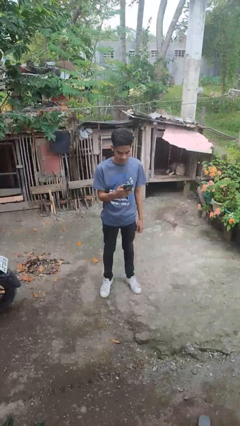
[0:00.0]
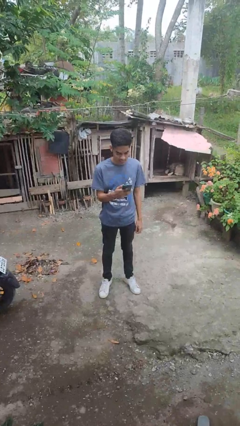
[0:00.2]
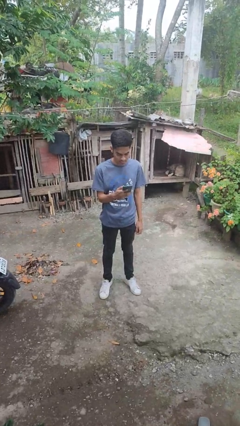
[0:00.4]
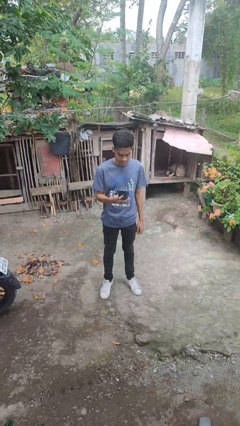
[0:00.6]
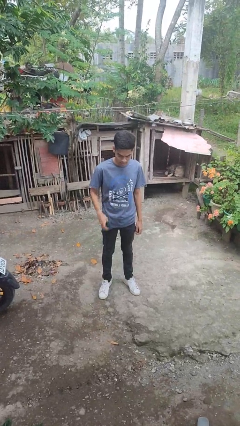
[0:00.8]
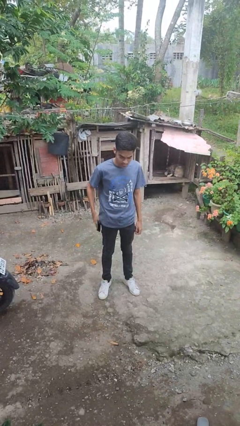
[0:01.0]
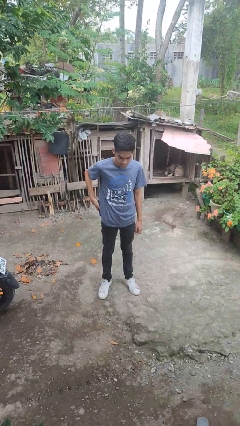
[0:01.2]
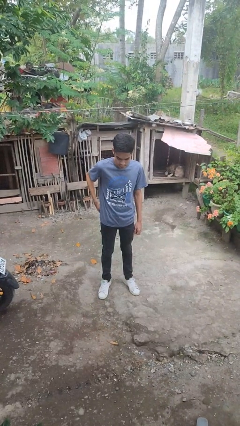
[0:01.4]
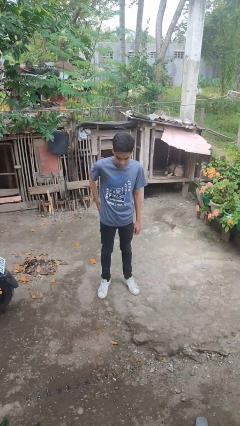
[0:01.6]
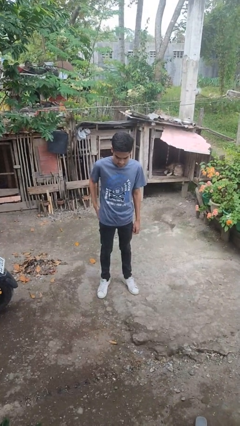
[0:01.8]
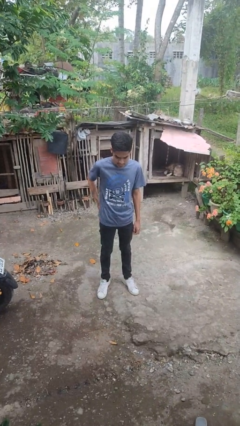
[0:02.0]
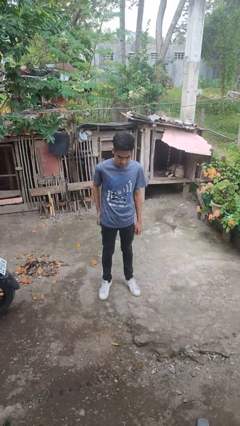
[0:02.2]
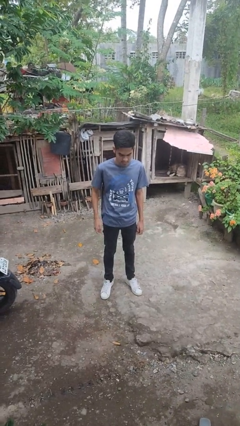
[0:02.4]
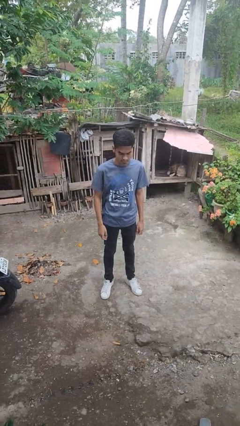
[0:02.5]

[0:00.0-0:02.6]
person puts phone into pocket

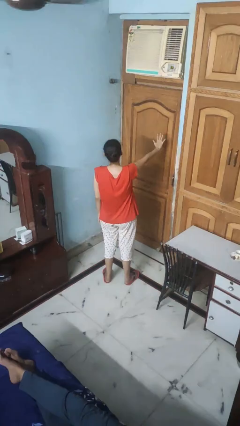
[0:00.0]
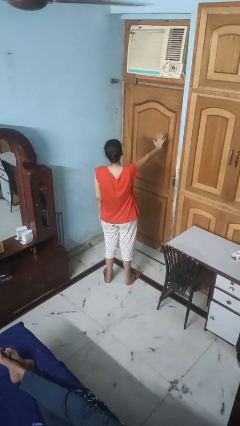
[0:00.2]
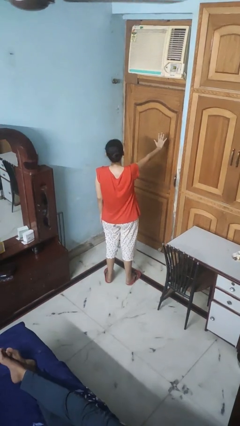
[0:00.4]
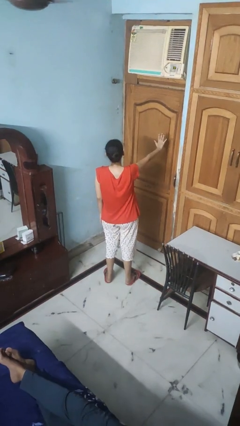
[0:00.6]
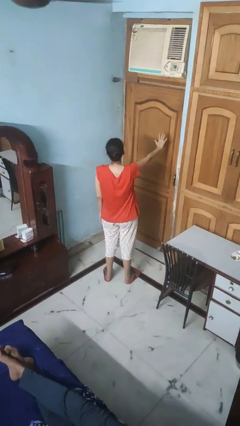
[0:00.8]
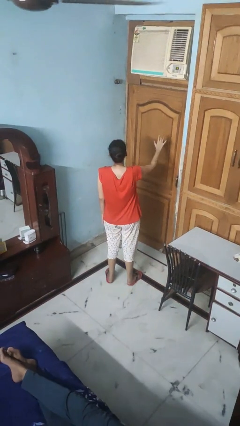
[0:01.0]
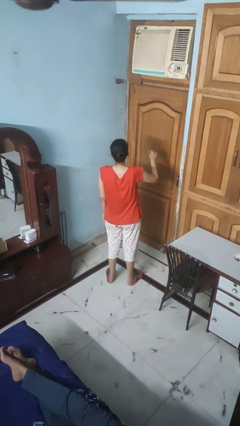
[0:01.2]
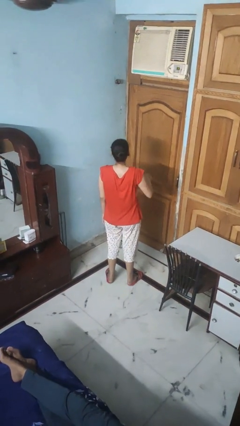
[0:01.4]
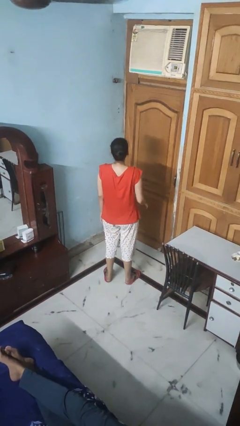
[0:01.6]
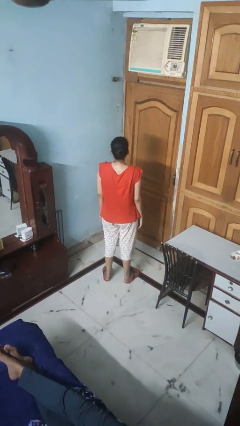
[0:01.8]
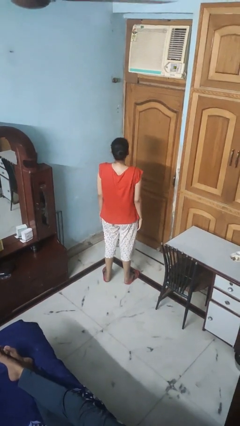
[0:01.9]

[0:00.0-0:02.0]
person gestures number five

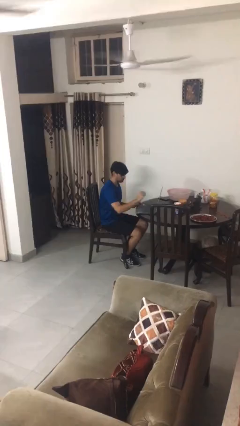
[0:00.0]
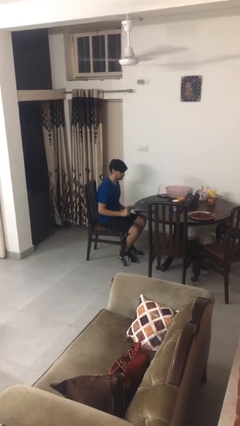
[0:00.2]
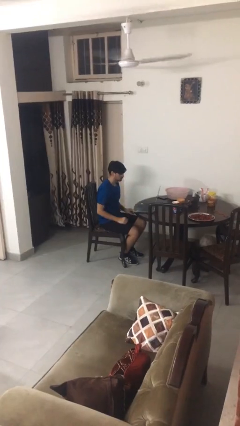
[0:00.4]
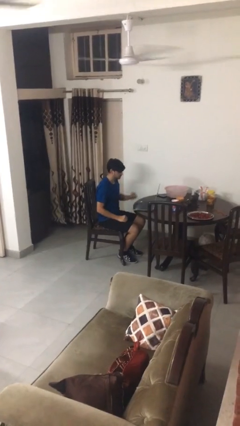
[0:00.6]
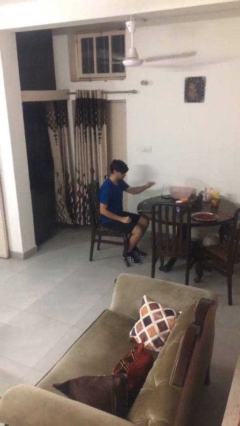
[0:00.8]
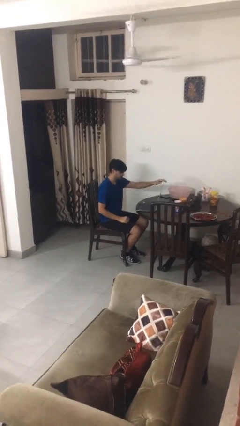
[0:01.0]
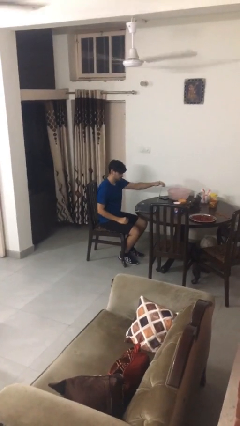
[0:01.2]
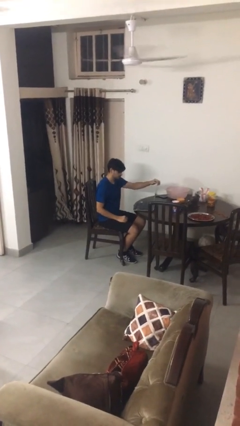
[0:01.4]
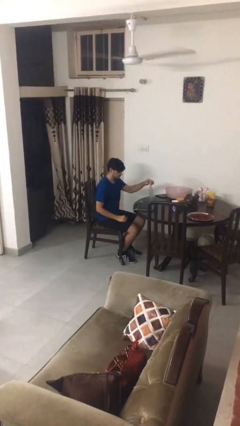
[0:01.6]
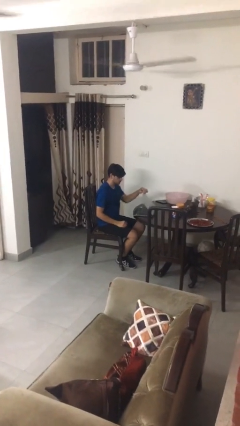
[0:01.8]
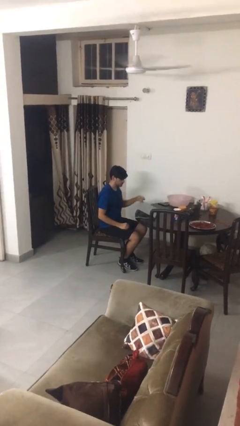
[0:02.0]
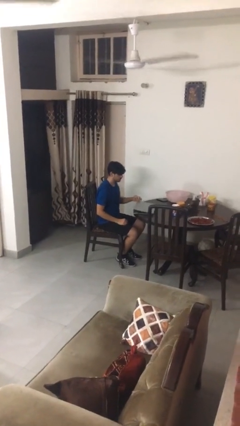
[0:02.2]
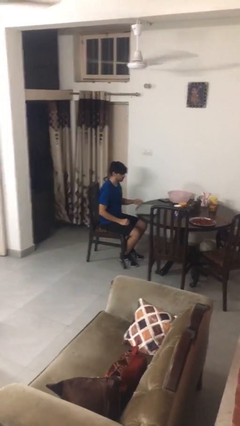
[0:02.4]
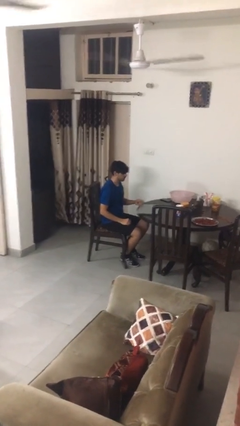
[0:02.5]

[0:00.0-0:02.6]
person closes laptop

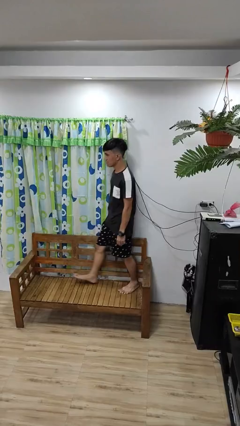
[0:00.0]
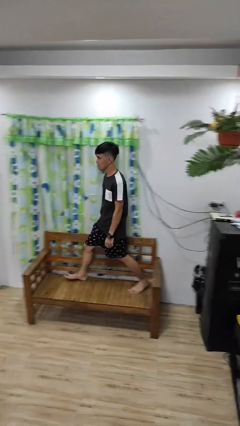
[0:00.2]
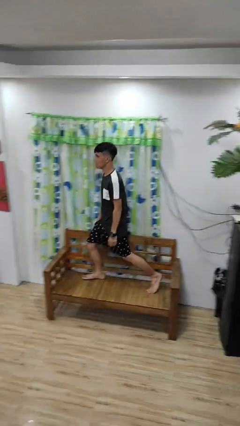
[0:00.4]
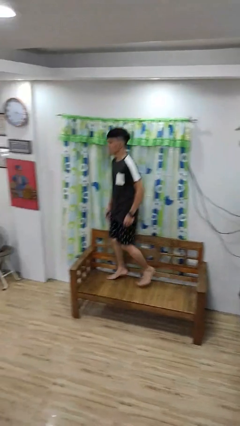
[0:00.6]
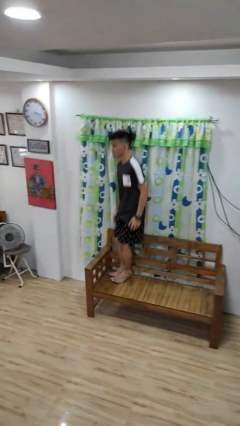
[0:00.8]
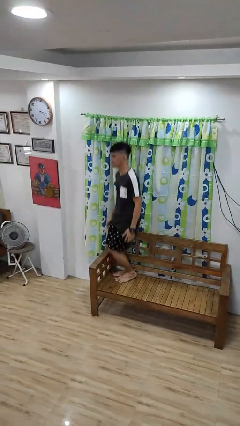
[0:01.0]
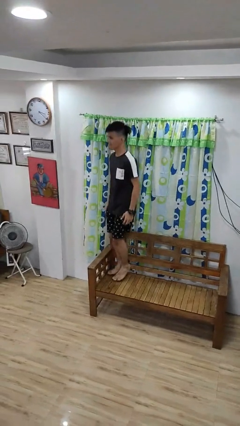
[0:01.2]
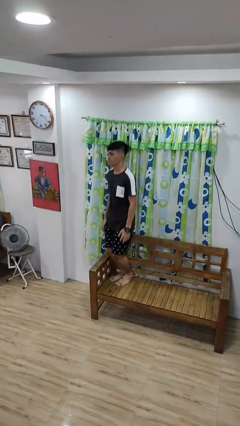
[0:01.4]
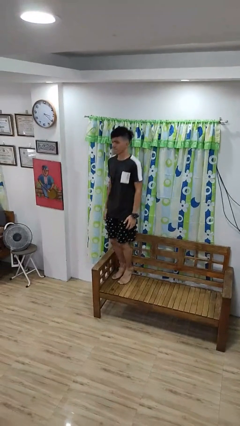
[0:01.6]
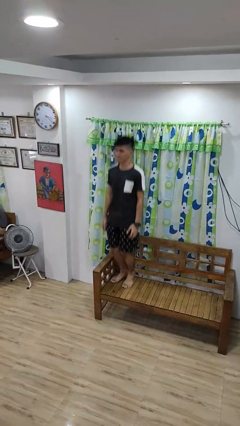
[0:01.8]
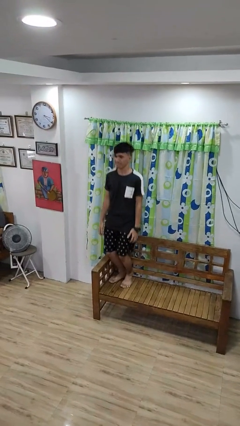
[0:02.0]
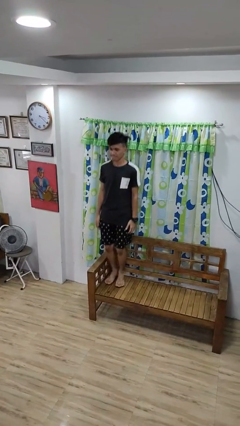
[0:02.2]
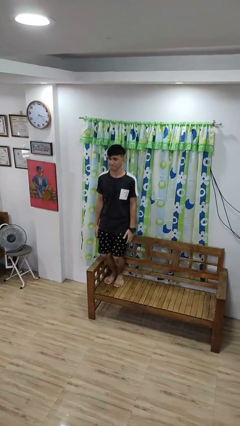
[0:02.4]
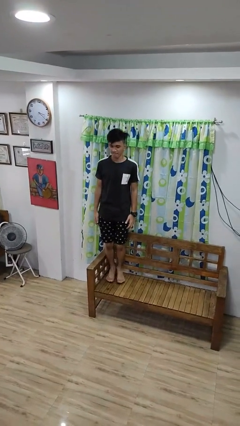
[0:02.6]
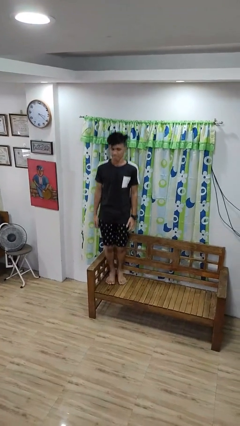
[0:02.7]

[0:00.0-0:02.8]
person jumps on couch

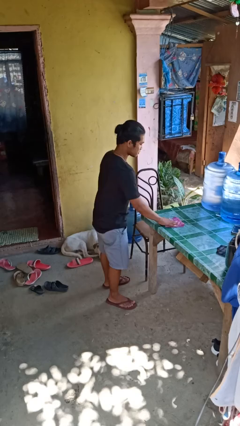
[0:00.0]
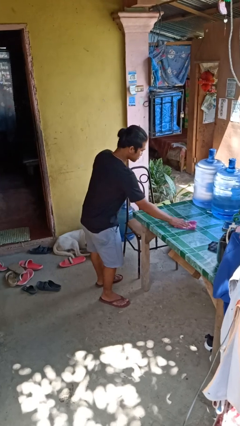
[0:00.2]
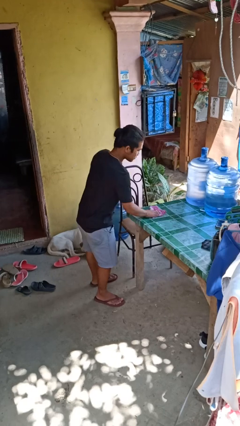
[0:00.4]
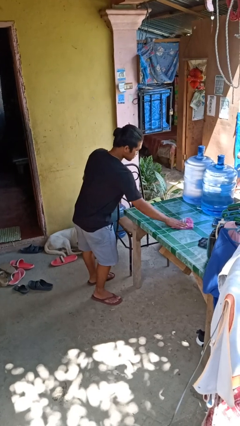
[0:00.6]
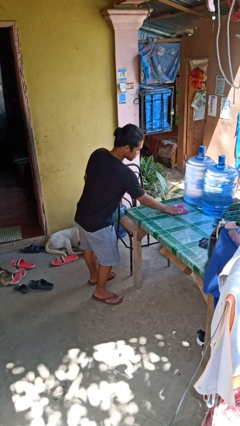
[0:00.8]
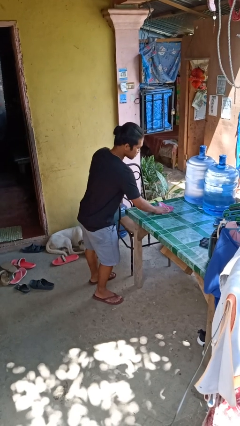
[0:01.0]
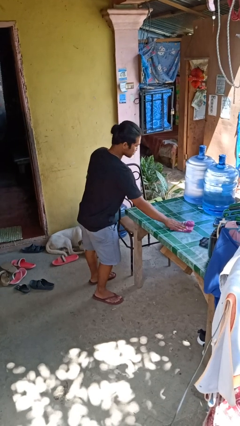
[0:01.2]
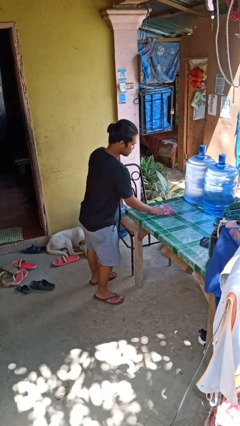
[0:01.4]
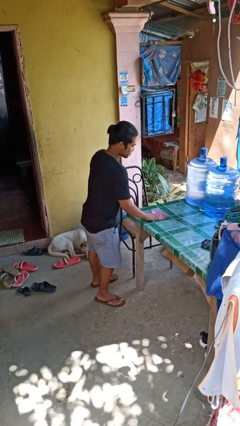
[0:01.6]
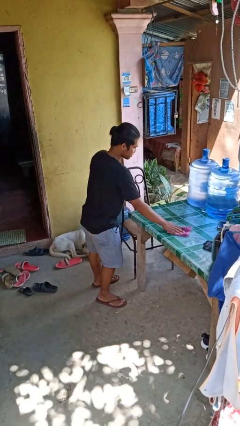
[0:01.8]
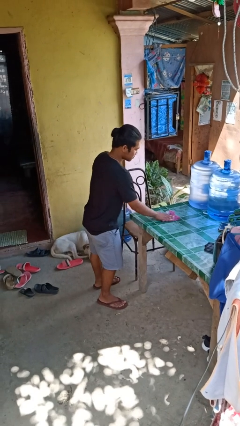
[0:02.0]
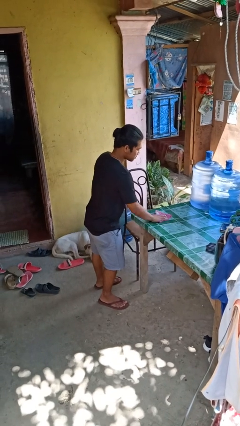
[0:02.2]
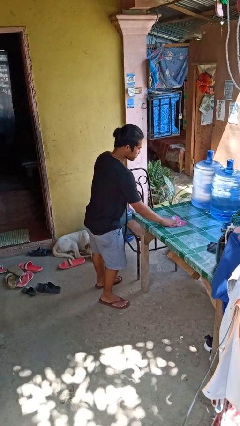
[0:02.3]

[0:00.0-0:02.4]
person cleans table with rag

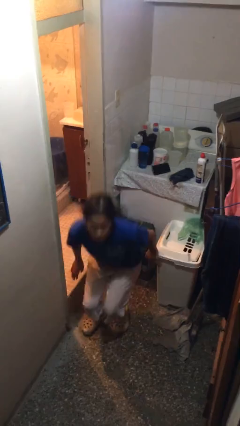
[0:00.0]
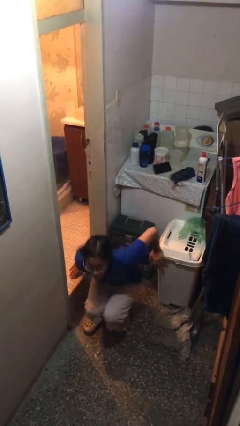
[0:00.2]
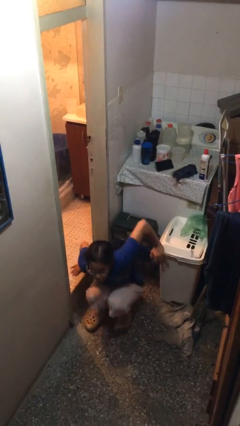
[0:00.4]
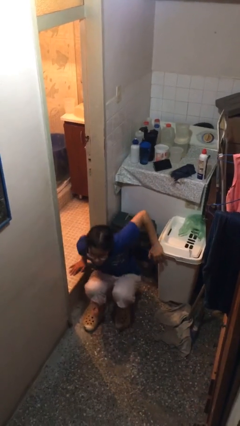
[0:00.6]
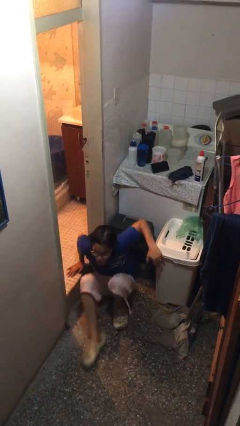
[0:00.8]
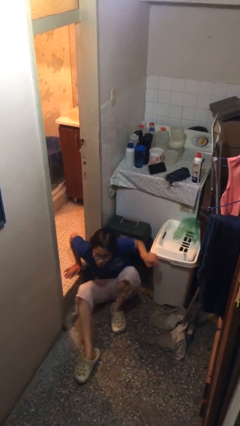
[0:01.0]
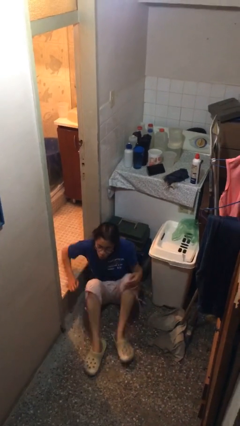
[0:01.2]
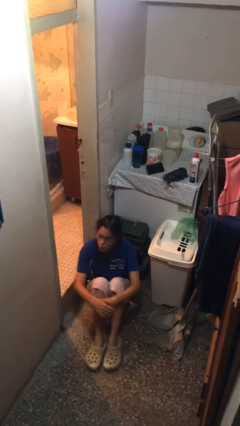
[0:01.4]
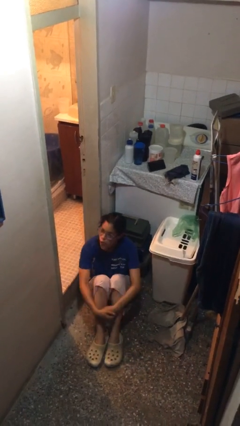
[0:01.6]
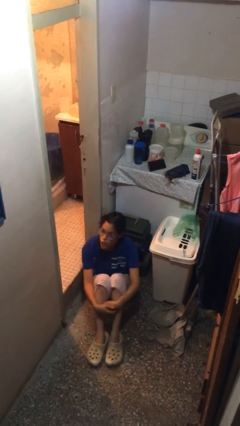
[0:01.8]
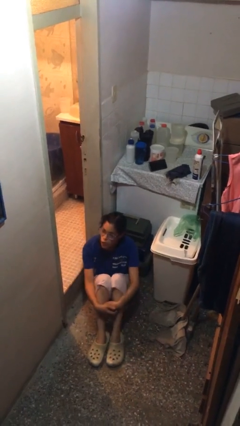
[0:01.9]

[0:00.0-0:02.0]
person sits down

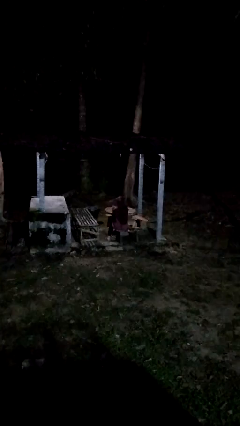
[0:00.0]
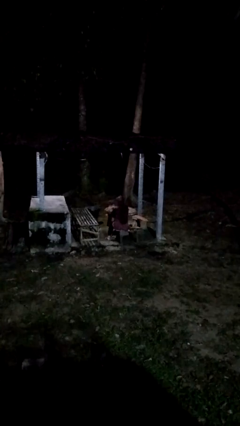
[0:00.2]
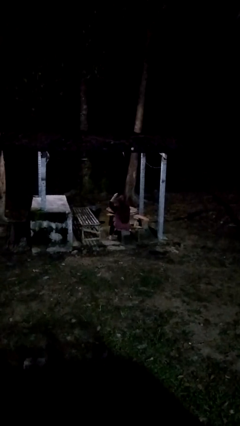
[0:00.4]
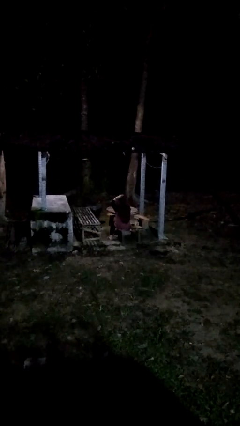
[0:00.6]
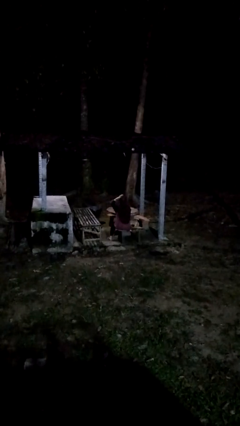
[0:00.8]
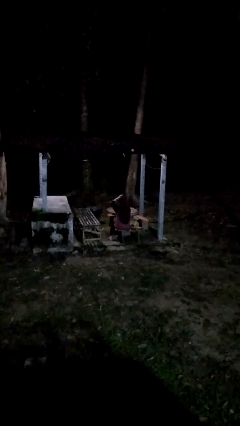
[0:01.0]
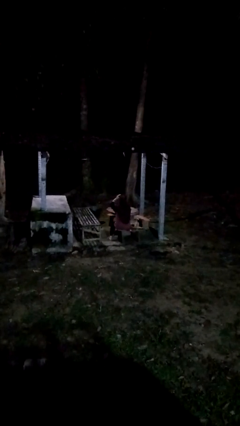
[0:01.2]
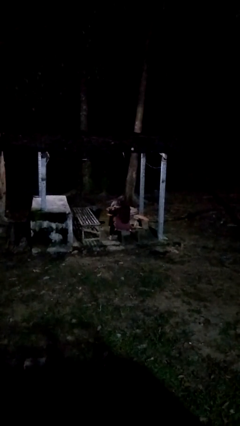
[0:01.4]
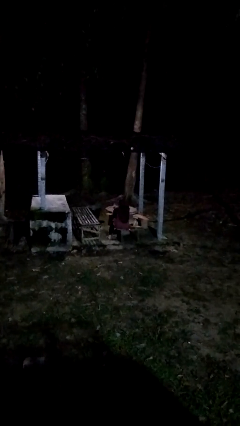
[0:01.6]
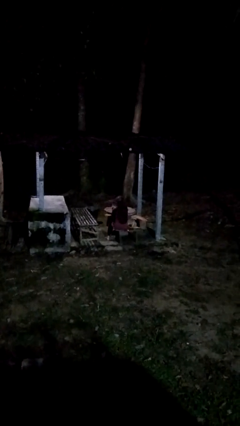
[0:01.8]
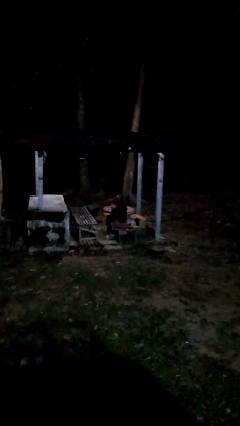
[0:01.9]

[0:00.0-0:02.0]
person pats head

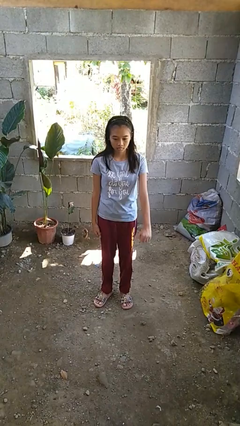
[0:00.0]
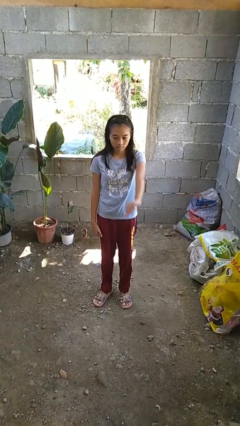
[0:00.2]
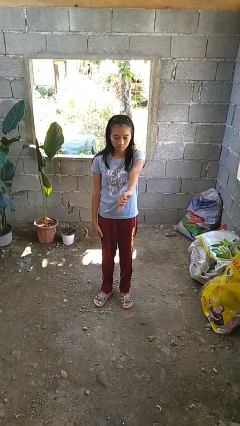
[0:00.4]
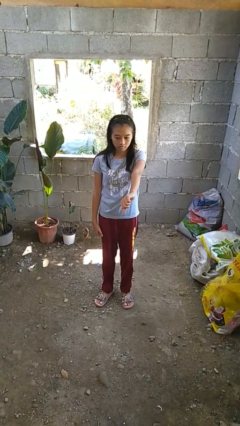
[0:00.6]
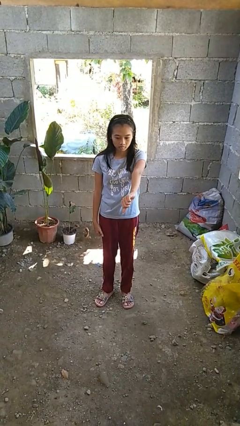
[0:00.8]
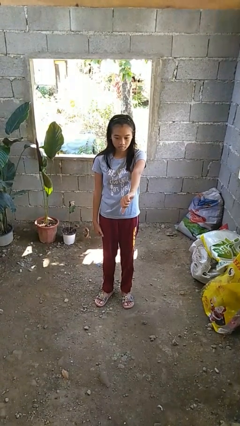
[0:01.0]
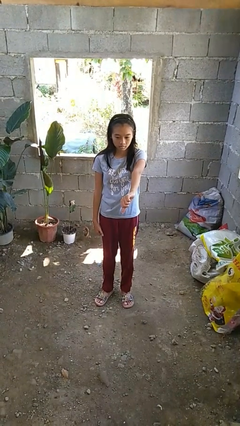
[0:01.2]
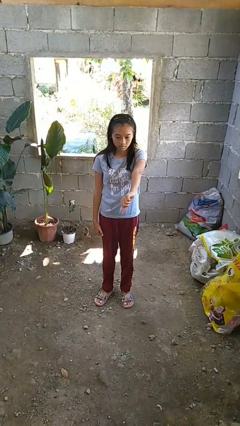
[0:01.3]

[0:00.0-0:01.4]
person gestures thumbs down
